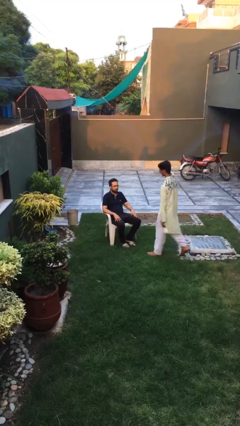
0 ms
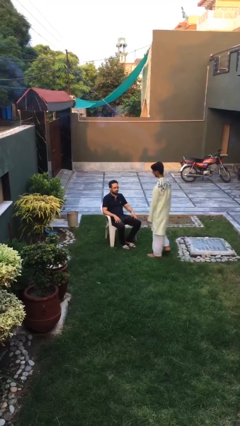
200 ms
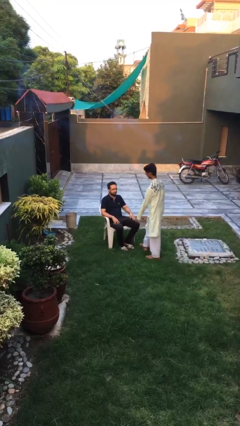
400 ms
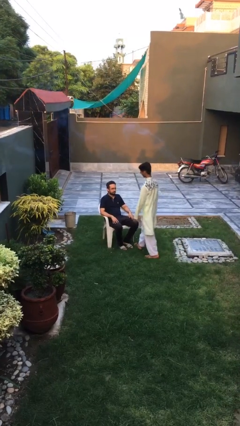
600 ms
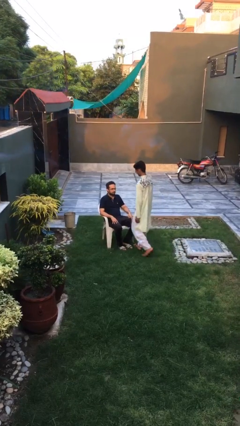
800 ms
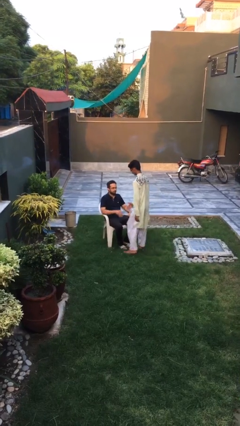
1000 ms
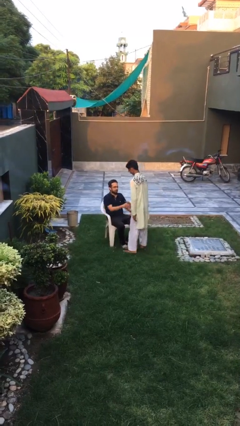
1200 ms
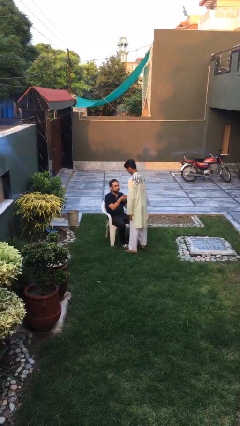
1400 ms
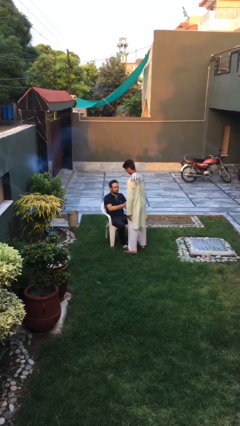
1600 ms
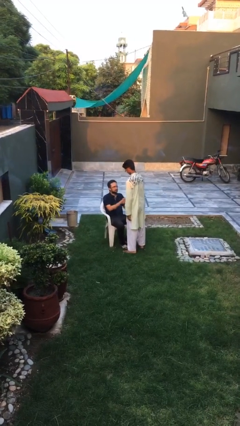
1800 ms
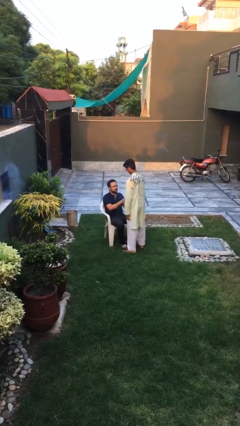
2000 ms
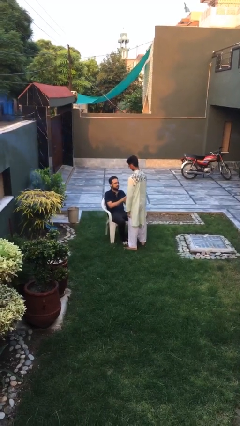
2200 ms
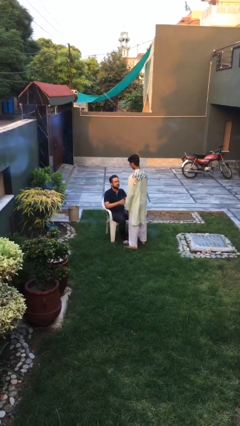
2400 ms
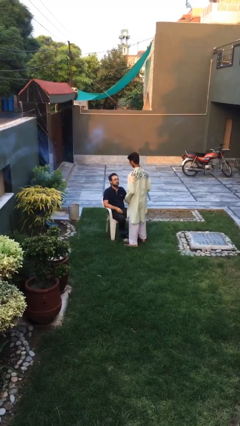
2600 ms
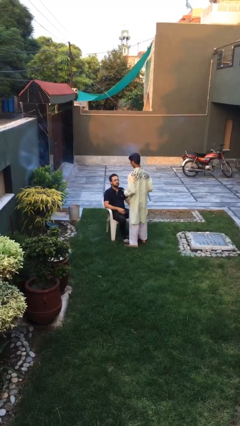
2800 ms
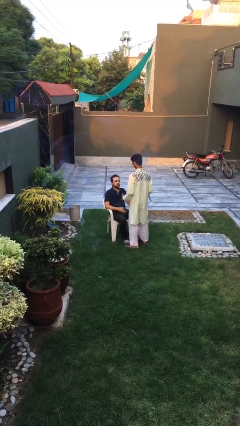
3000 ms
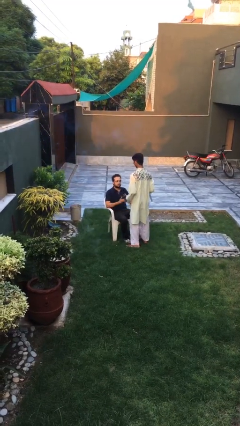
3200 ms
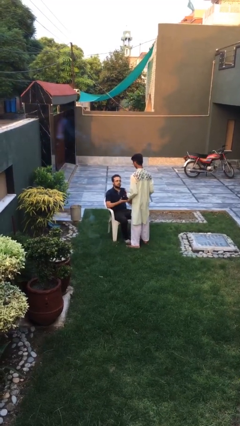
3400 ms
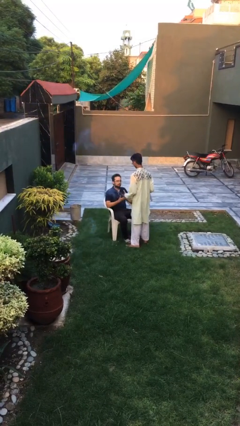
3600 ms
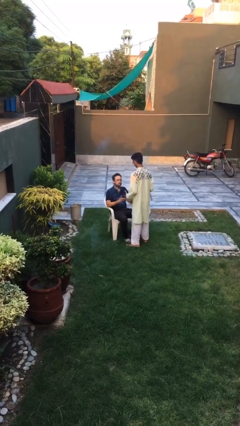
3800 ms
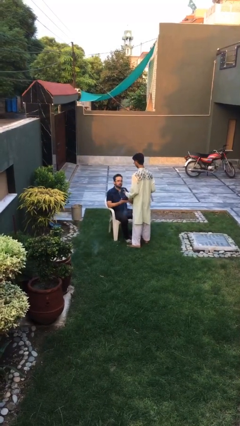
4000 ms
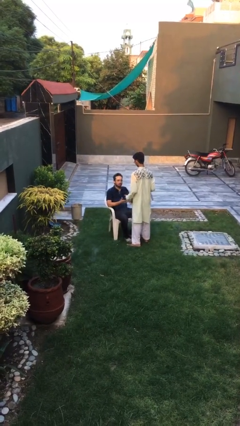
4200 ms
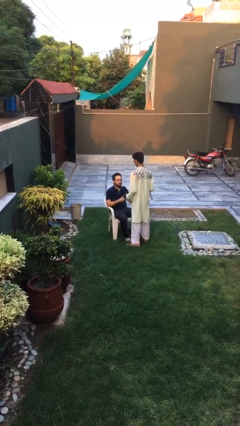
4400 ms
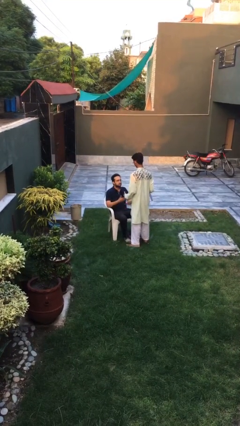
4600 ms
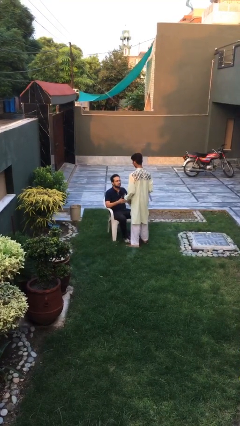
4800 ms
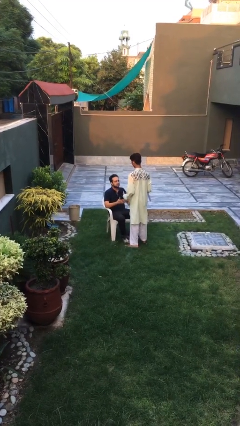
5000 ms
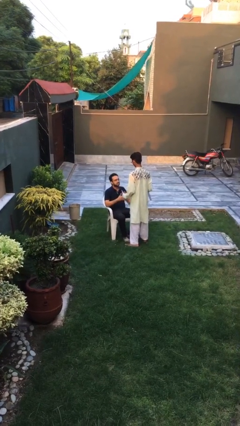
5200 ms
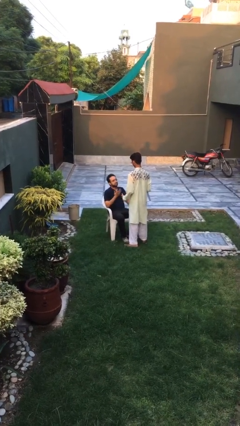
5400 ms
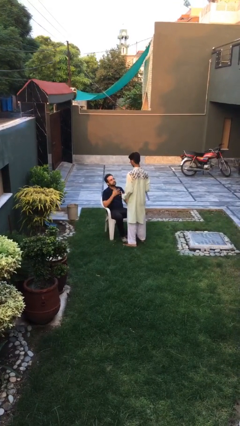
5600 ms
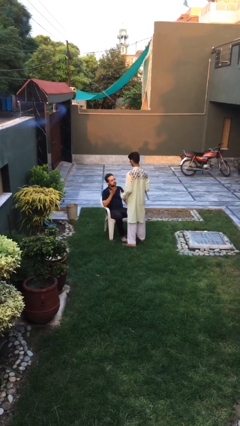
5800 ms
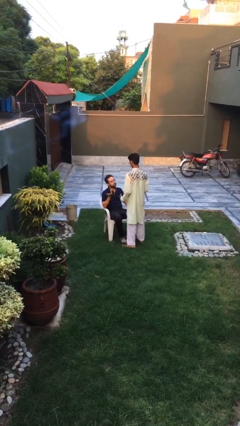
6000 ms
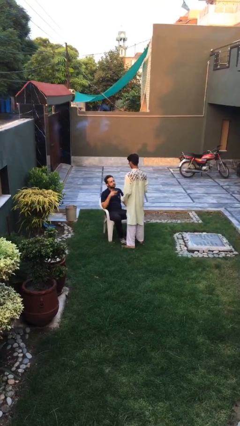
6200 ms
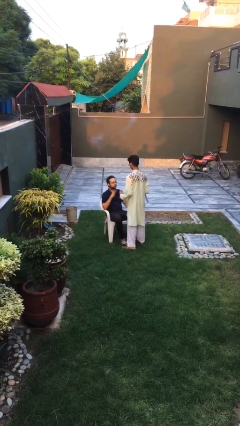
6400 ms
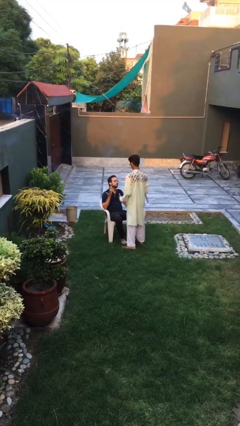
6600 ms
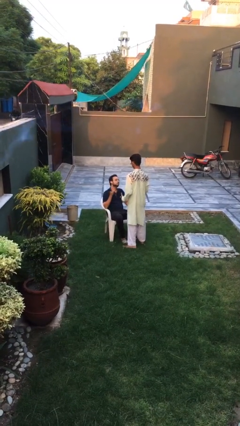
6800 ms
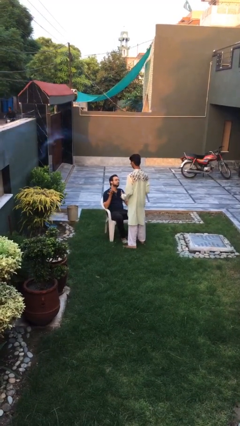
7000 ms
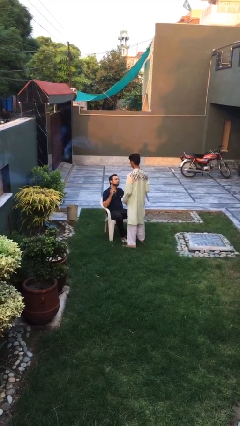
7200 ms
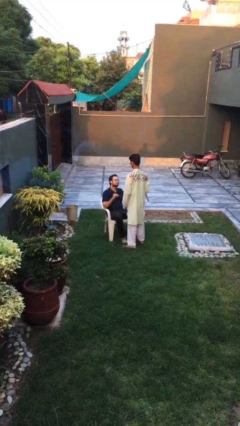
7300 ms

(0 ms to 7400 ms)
person shakes hand

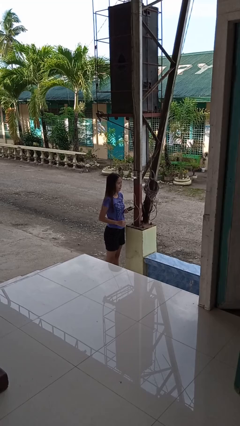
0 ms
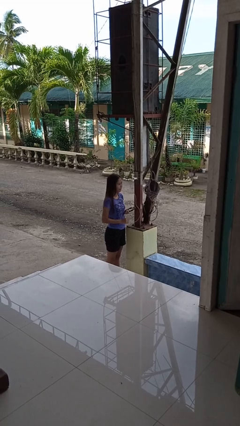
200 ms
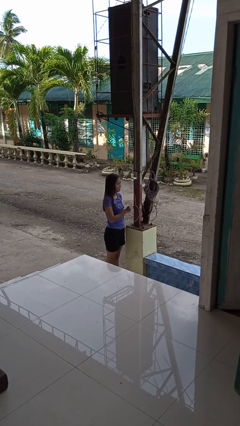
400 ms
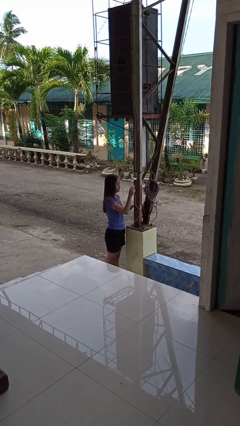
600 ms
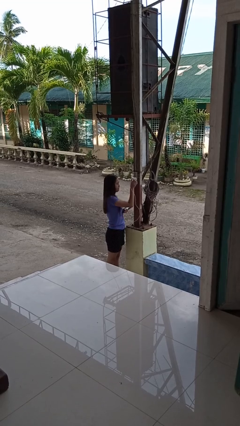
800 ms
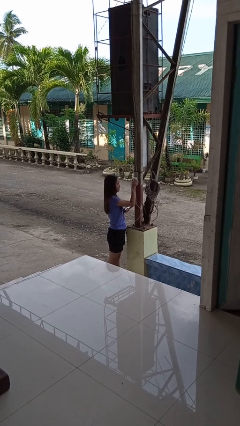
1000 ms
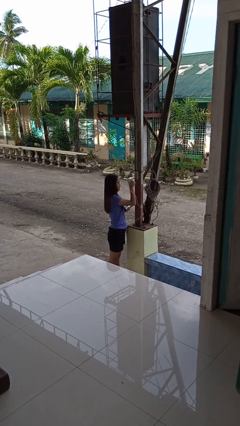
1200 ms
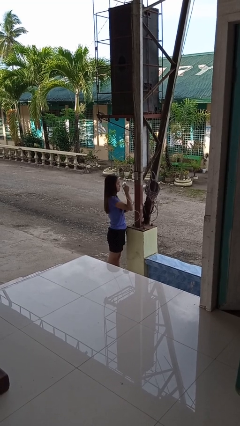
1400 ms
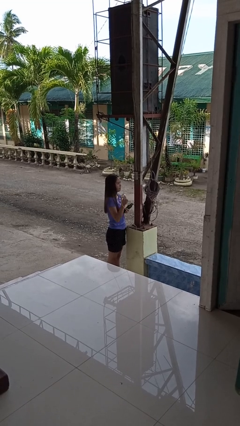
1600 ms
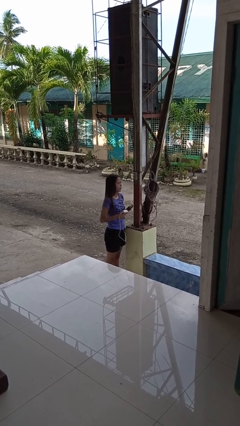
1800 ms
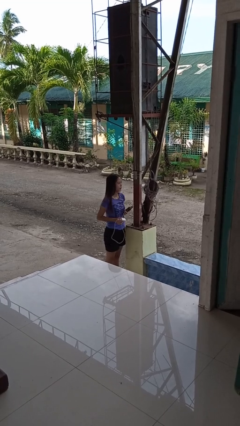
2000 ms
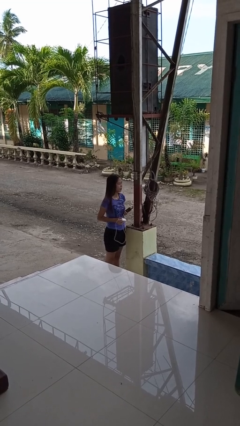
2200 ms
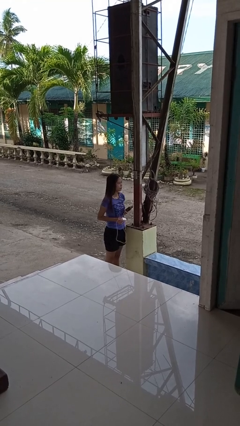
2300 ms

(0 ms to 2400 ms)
person unplugs from electrical socket

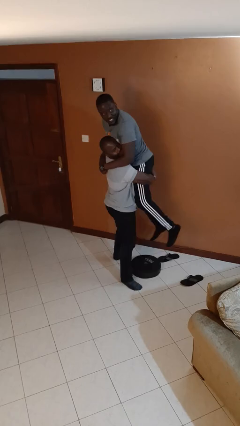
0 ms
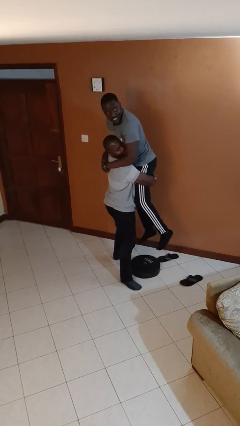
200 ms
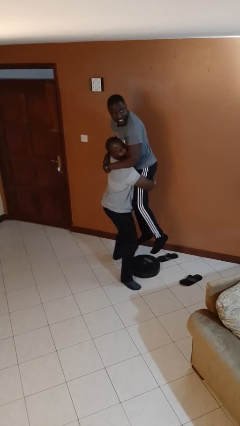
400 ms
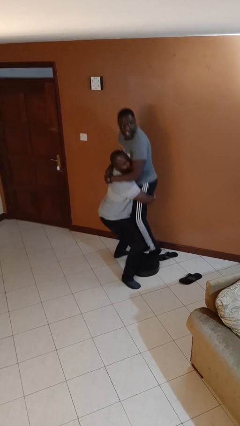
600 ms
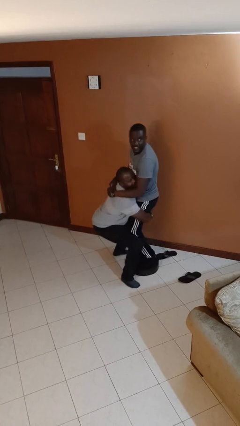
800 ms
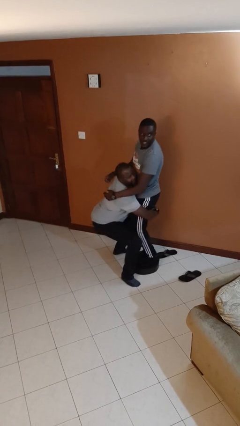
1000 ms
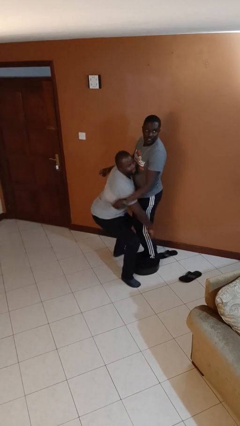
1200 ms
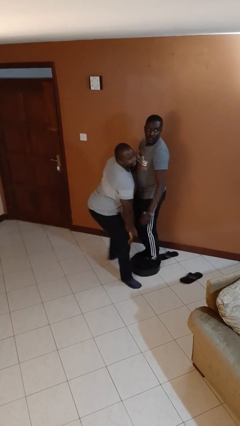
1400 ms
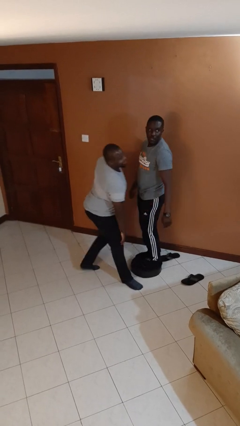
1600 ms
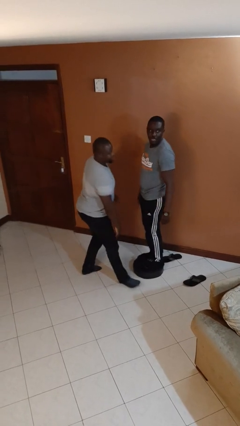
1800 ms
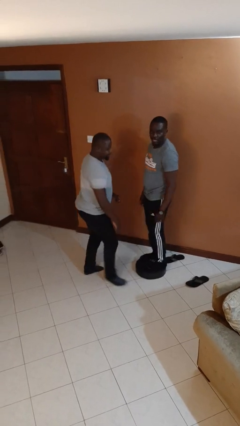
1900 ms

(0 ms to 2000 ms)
person puts down person

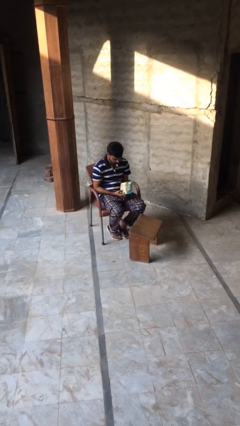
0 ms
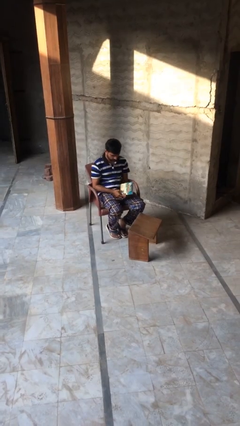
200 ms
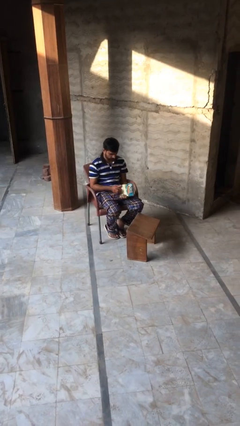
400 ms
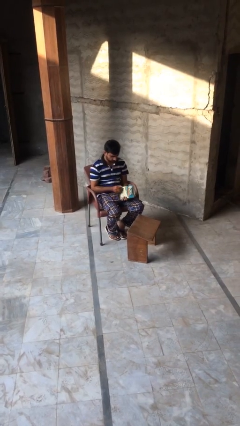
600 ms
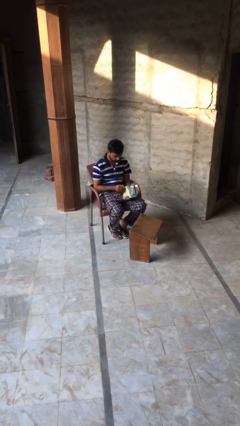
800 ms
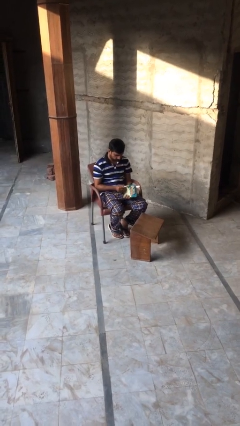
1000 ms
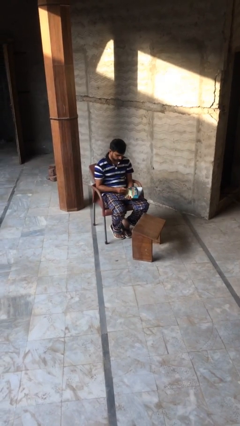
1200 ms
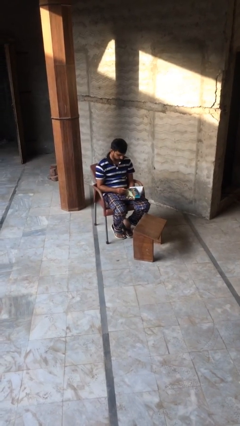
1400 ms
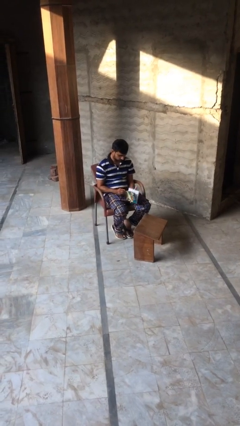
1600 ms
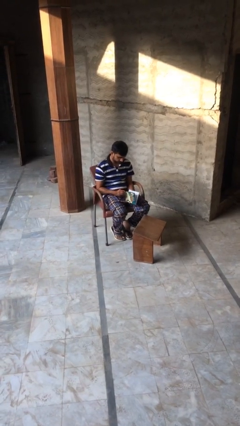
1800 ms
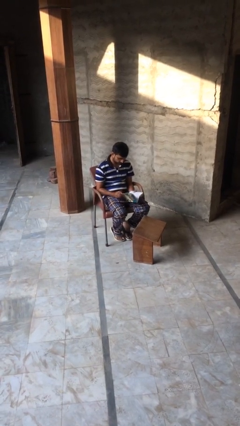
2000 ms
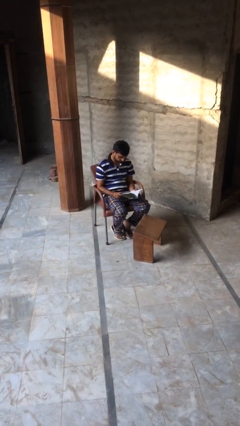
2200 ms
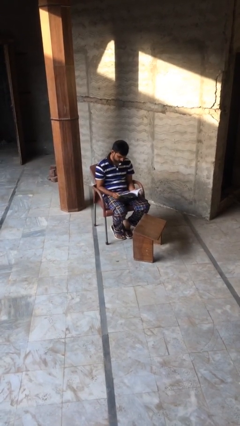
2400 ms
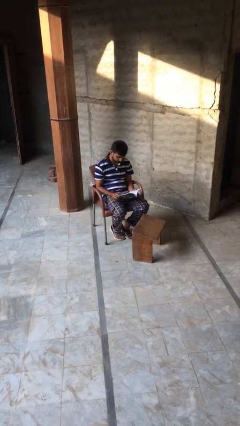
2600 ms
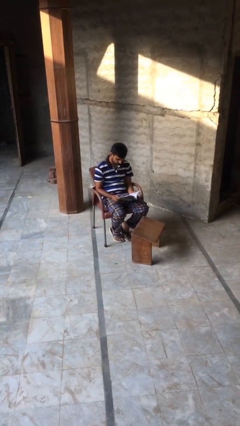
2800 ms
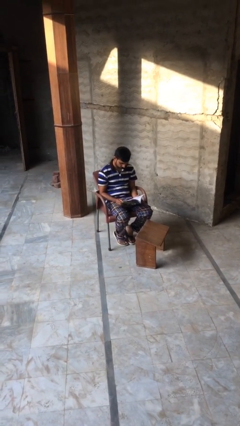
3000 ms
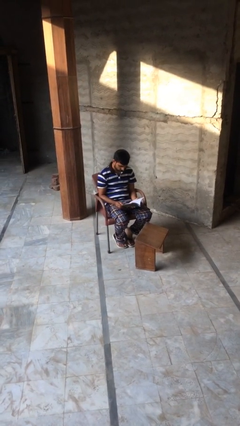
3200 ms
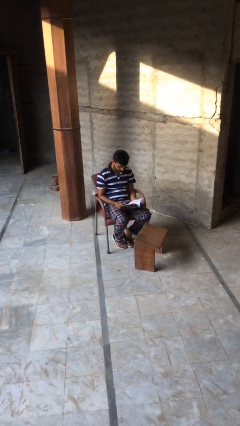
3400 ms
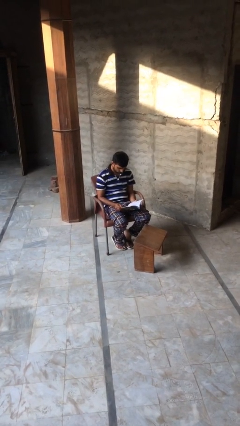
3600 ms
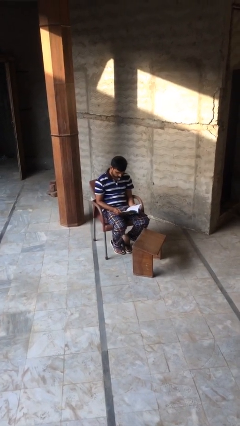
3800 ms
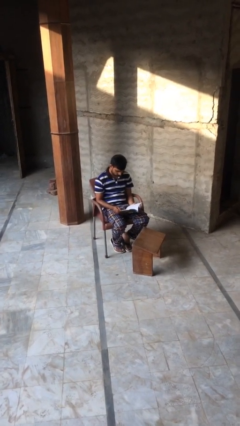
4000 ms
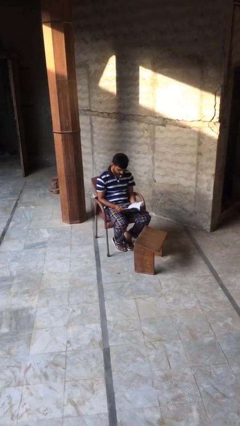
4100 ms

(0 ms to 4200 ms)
person reads document

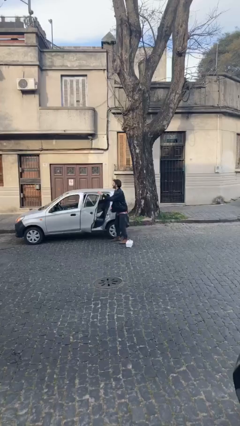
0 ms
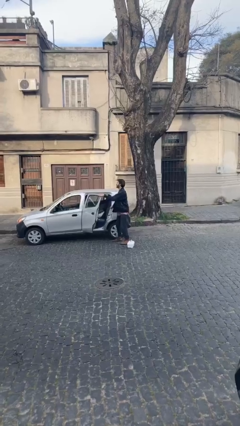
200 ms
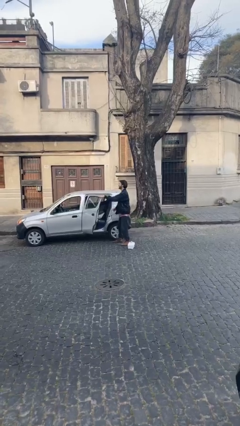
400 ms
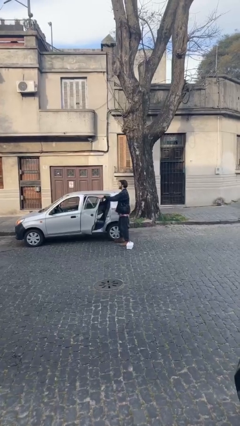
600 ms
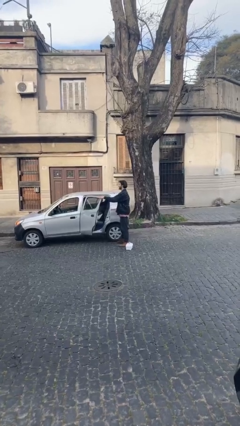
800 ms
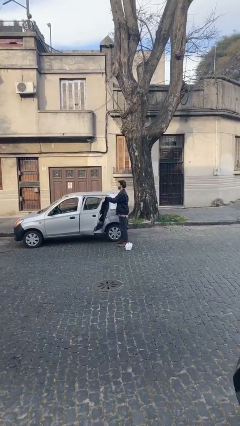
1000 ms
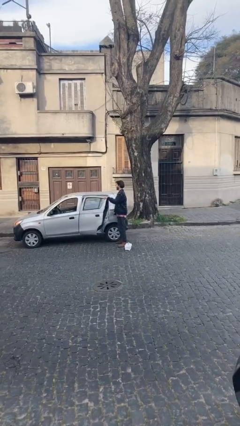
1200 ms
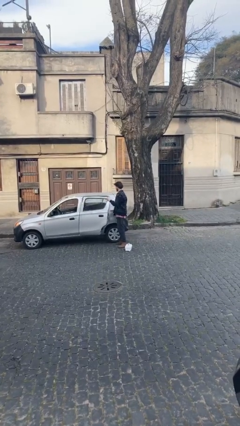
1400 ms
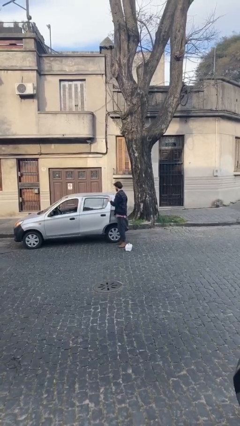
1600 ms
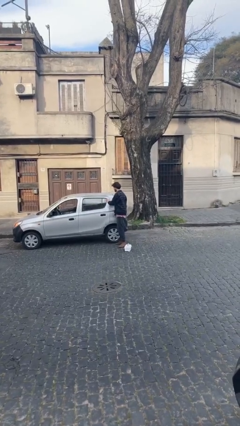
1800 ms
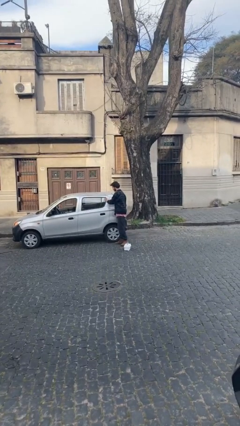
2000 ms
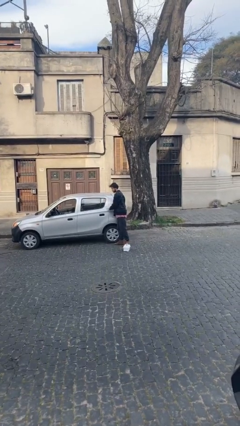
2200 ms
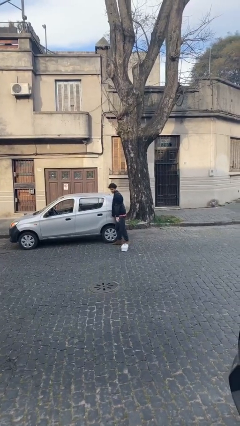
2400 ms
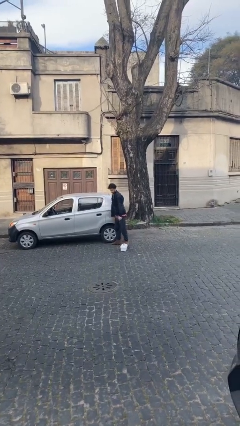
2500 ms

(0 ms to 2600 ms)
person closes car door
